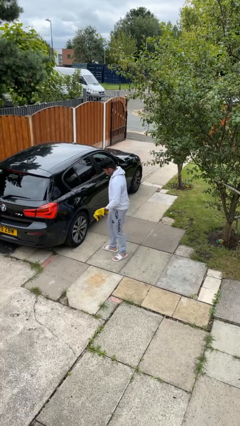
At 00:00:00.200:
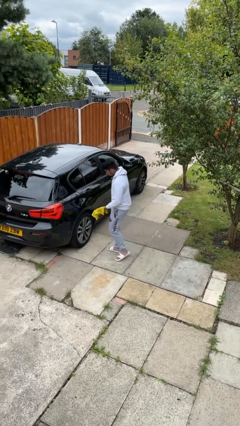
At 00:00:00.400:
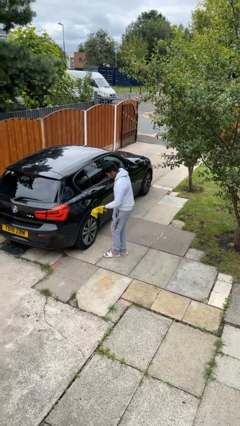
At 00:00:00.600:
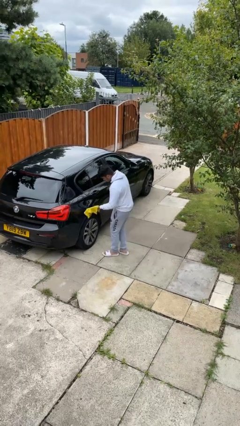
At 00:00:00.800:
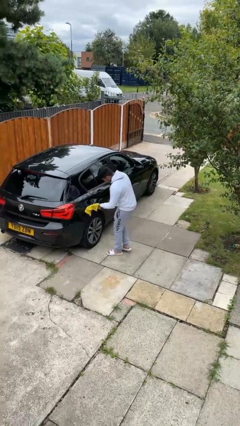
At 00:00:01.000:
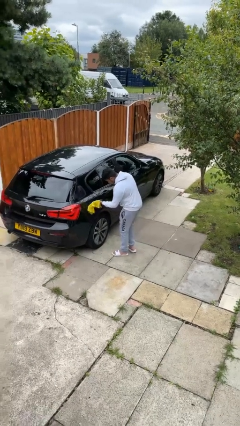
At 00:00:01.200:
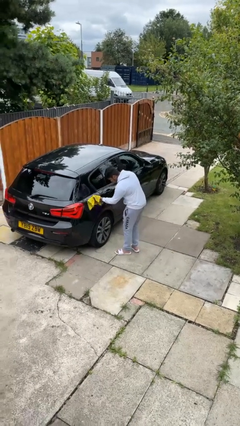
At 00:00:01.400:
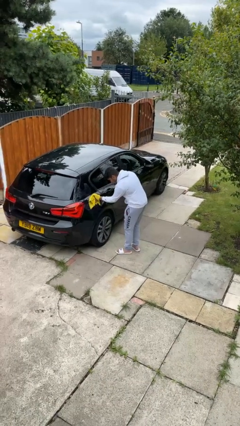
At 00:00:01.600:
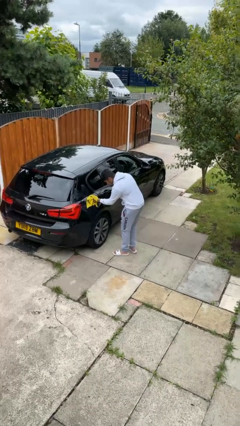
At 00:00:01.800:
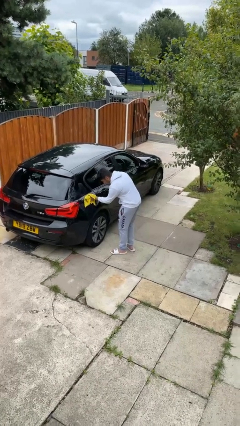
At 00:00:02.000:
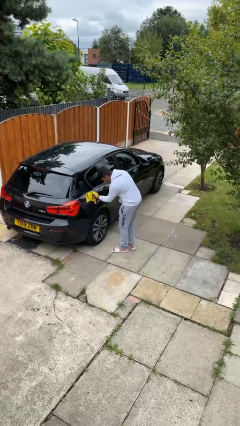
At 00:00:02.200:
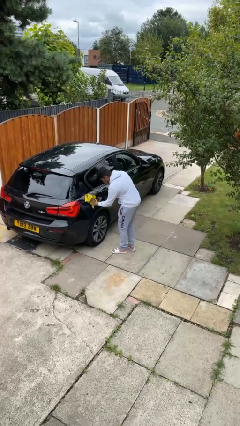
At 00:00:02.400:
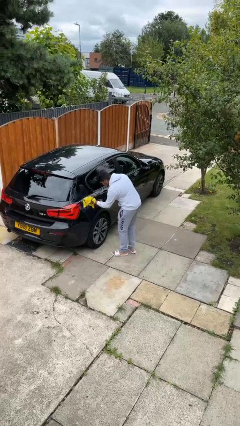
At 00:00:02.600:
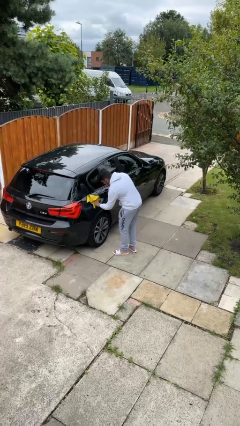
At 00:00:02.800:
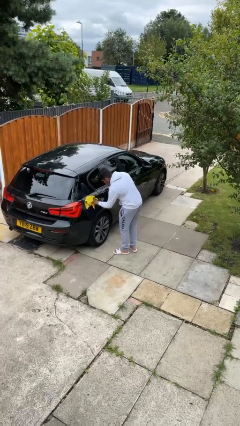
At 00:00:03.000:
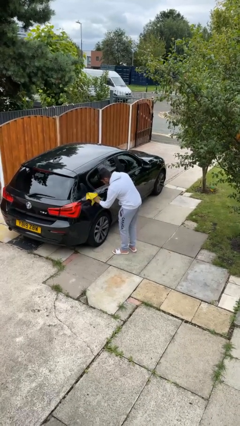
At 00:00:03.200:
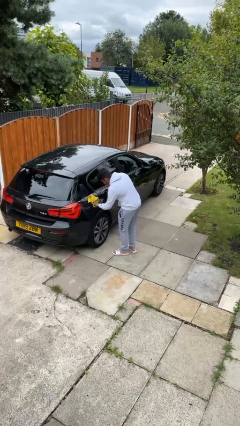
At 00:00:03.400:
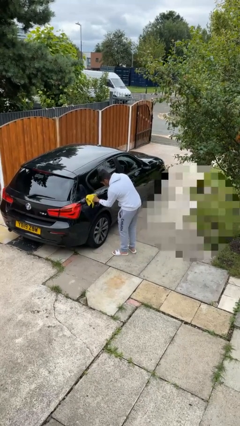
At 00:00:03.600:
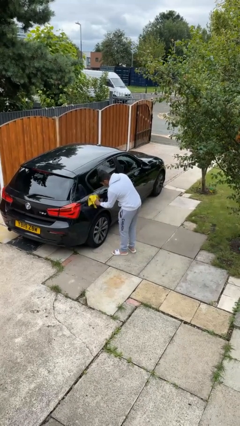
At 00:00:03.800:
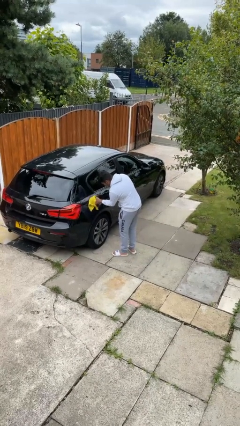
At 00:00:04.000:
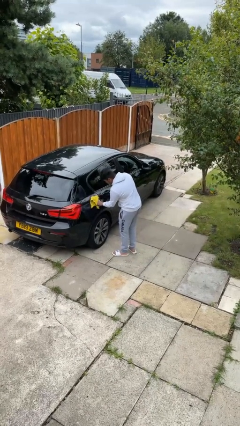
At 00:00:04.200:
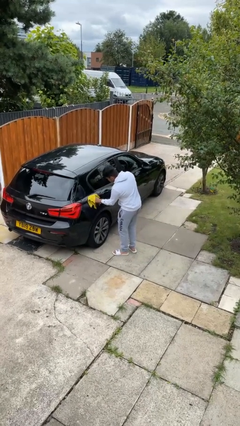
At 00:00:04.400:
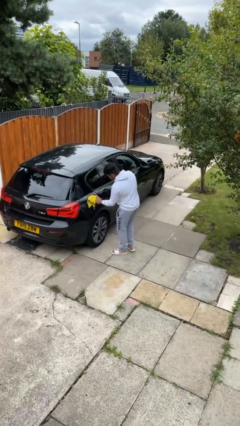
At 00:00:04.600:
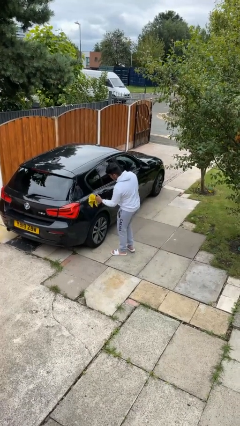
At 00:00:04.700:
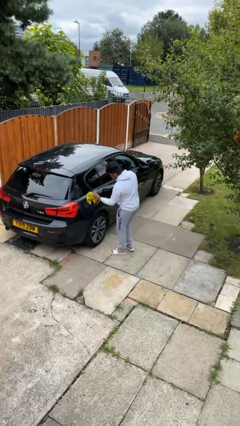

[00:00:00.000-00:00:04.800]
person polishes car with rag

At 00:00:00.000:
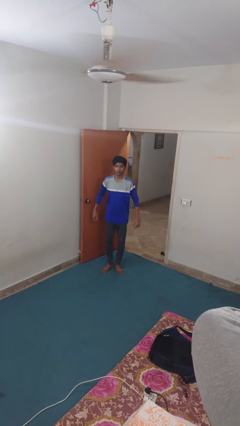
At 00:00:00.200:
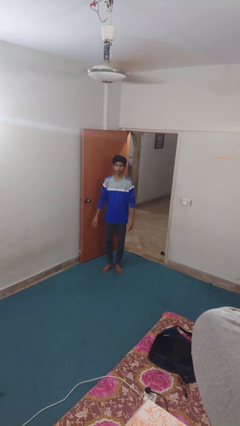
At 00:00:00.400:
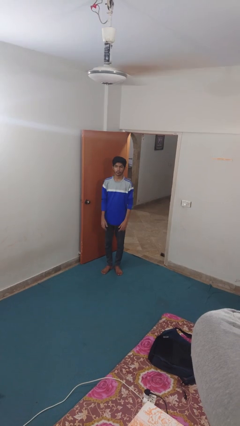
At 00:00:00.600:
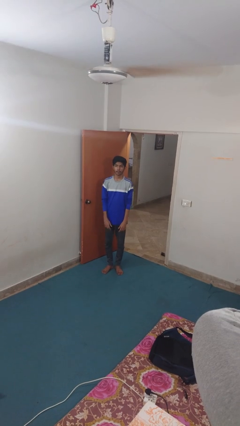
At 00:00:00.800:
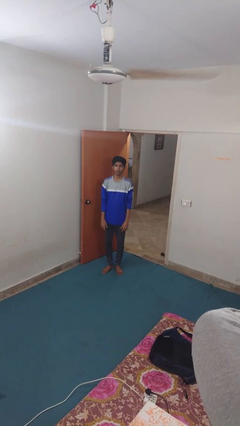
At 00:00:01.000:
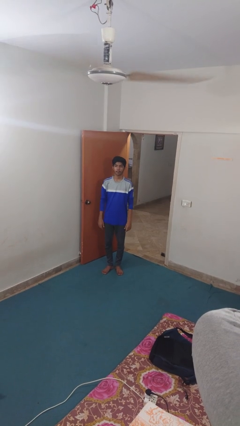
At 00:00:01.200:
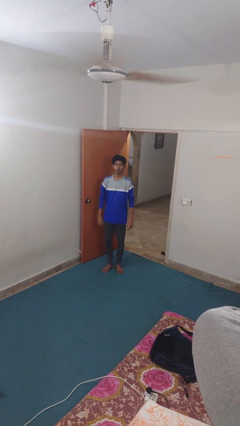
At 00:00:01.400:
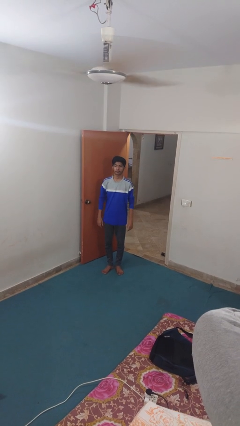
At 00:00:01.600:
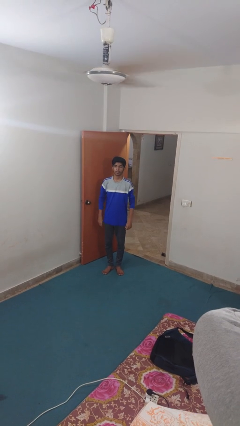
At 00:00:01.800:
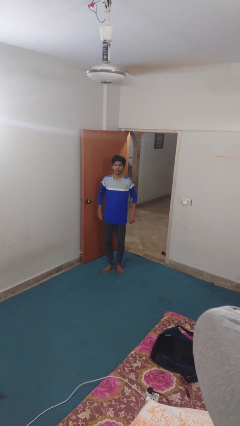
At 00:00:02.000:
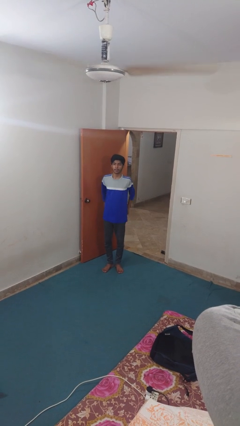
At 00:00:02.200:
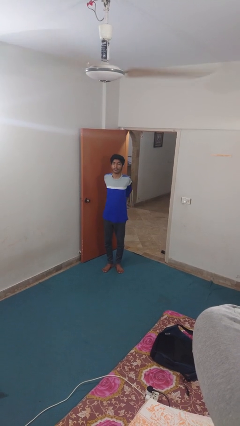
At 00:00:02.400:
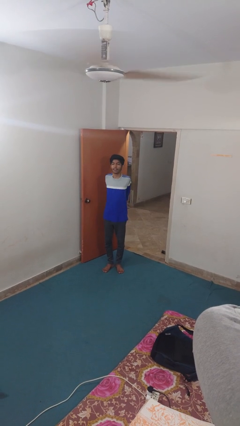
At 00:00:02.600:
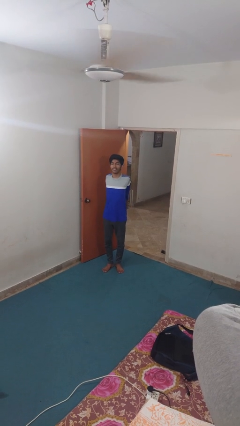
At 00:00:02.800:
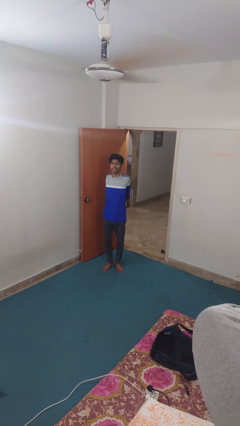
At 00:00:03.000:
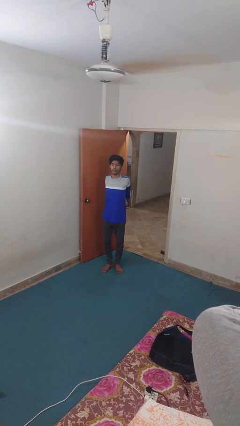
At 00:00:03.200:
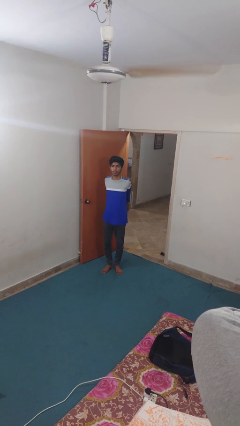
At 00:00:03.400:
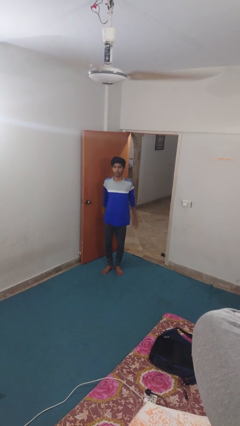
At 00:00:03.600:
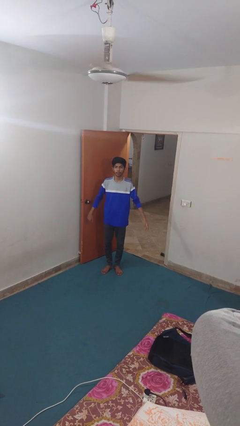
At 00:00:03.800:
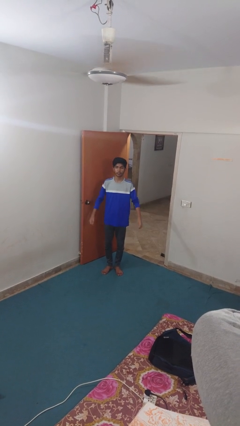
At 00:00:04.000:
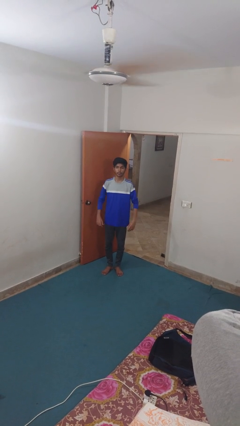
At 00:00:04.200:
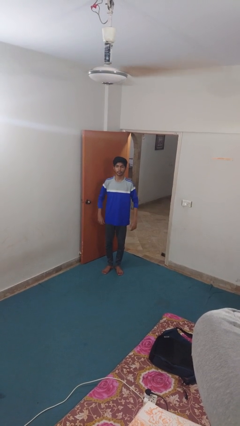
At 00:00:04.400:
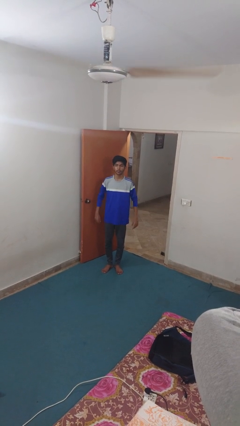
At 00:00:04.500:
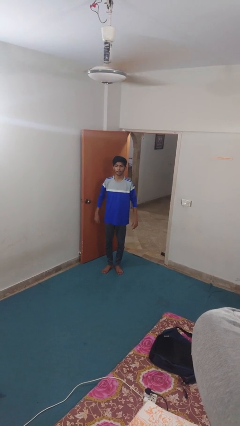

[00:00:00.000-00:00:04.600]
person stretches arms to side

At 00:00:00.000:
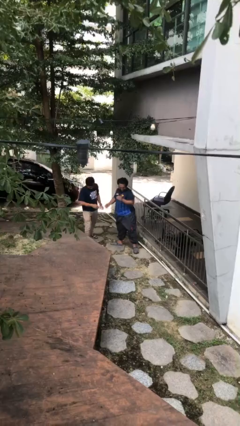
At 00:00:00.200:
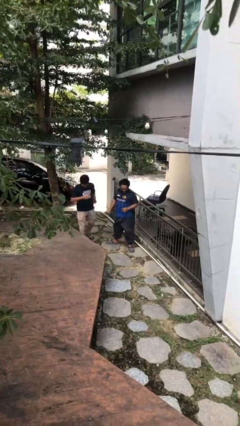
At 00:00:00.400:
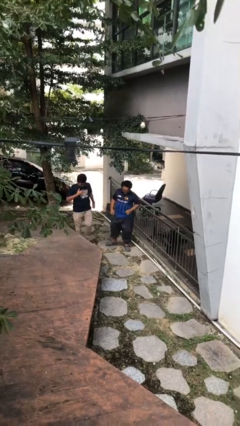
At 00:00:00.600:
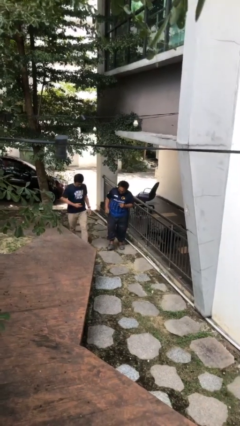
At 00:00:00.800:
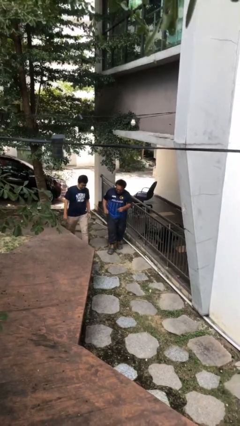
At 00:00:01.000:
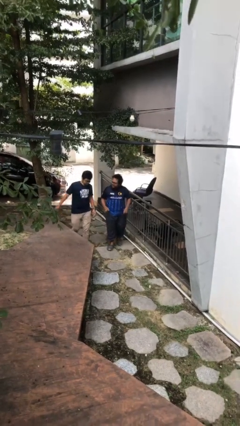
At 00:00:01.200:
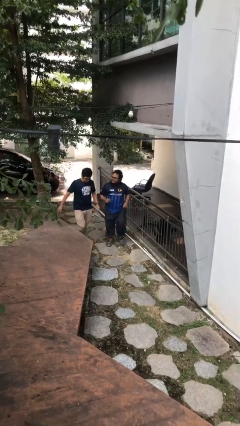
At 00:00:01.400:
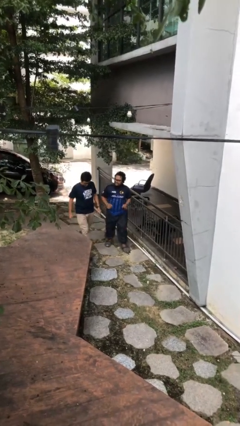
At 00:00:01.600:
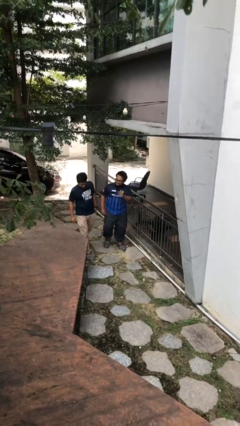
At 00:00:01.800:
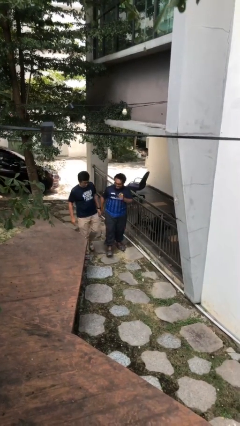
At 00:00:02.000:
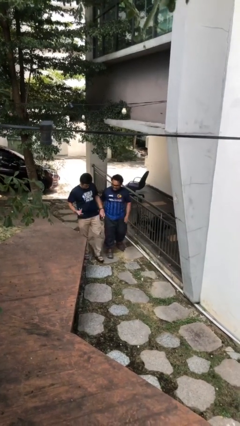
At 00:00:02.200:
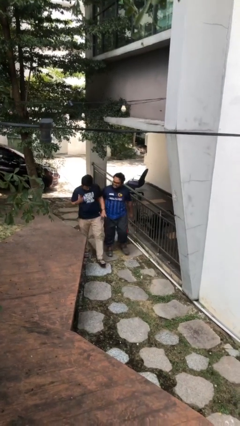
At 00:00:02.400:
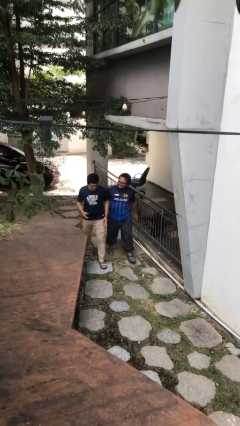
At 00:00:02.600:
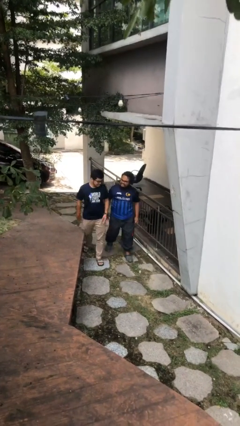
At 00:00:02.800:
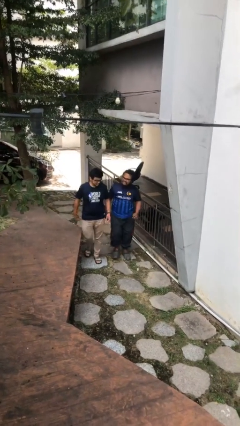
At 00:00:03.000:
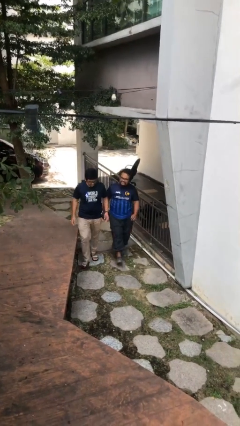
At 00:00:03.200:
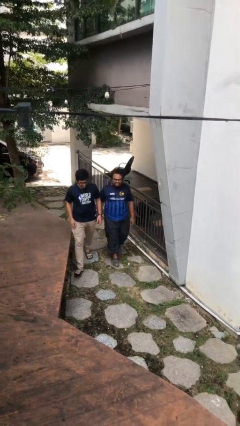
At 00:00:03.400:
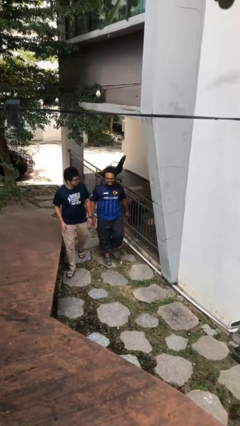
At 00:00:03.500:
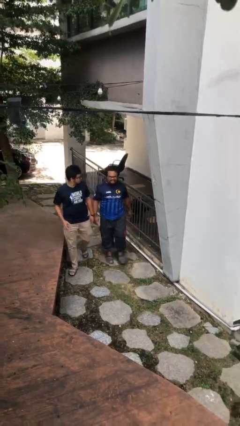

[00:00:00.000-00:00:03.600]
person talks to person

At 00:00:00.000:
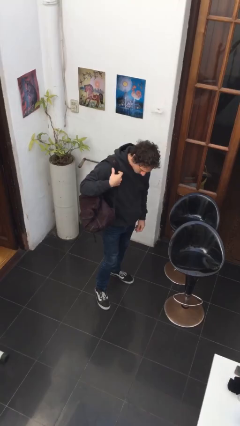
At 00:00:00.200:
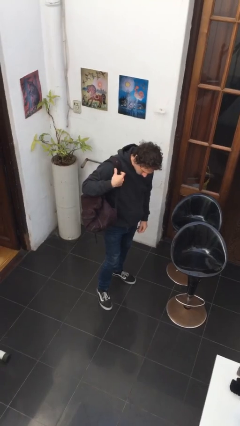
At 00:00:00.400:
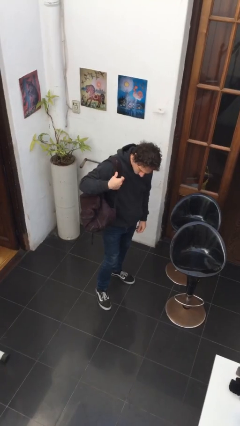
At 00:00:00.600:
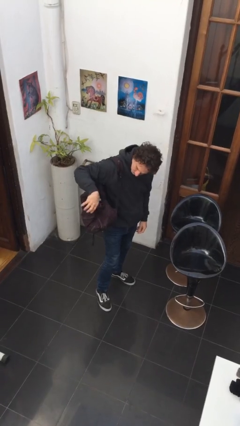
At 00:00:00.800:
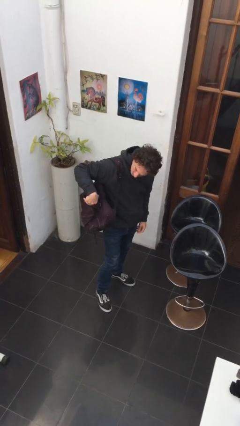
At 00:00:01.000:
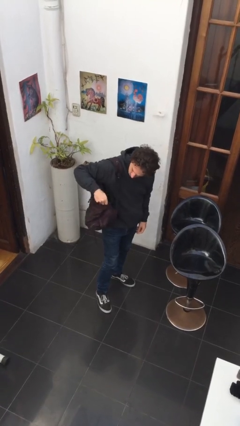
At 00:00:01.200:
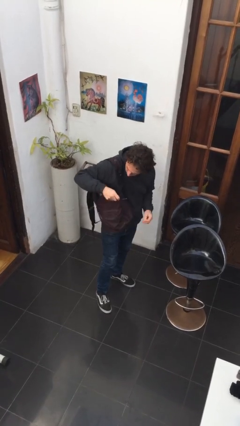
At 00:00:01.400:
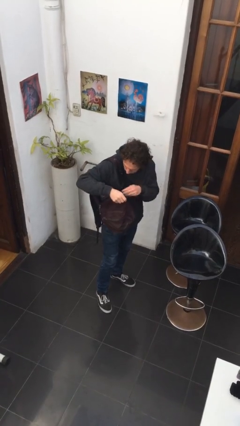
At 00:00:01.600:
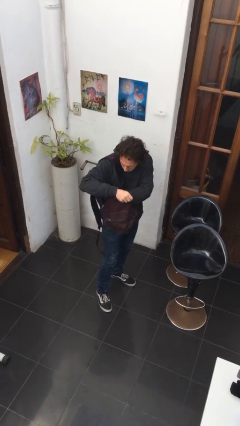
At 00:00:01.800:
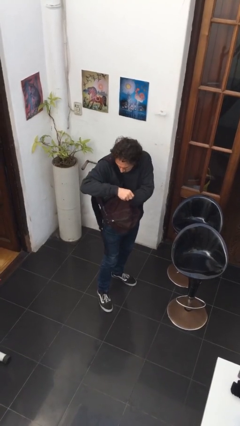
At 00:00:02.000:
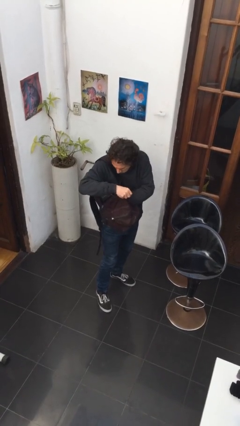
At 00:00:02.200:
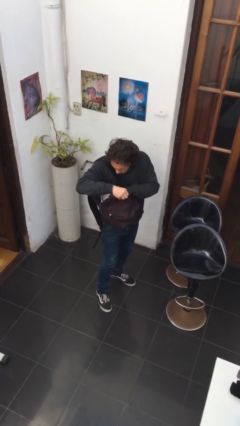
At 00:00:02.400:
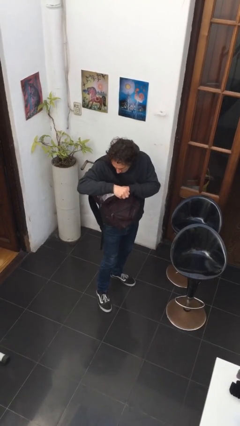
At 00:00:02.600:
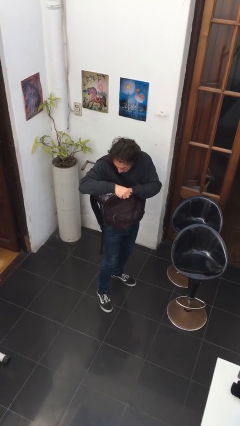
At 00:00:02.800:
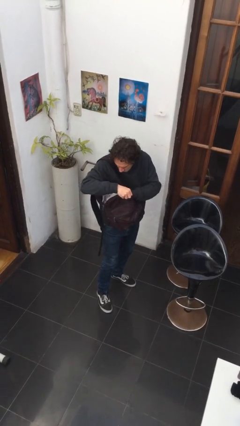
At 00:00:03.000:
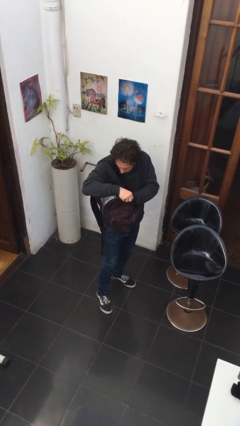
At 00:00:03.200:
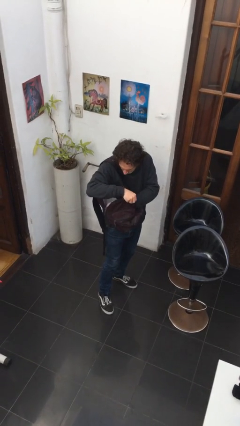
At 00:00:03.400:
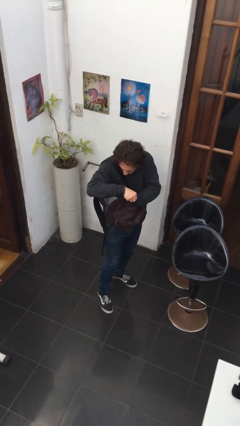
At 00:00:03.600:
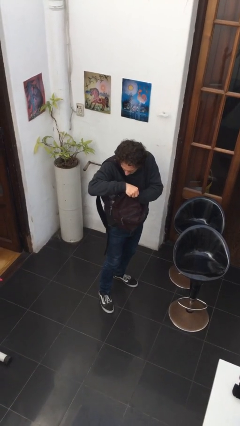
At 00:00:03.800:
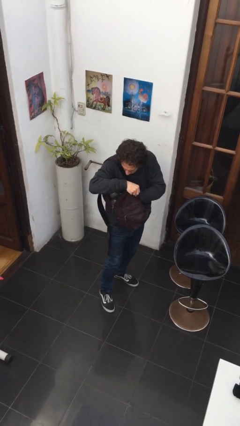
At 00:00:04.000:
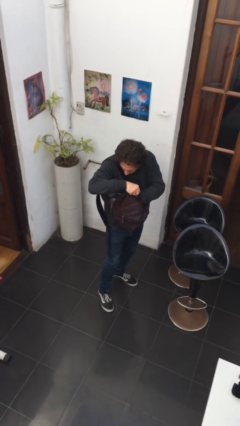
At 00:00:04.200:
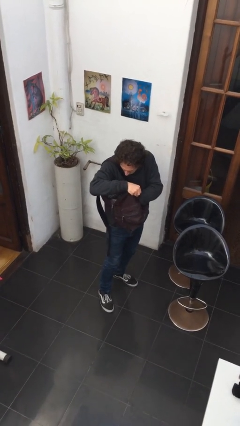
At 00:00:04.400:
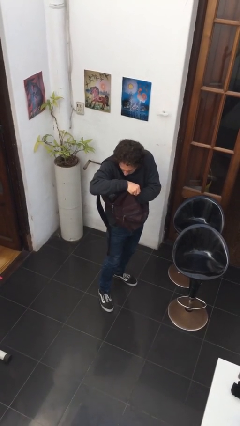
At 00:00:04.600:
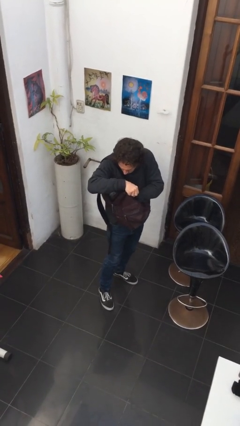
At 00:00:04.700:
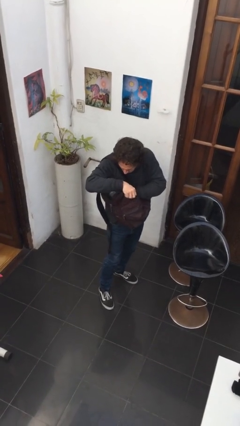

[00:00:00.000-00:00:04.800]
person searches in backpack
